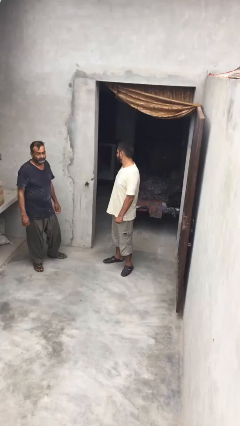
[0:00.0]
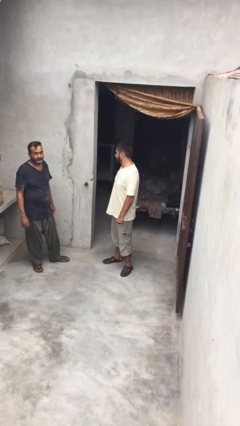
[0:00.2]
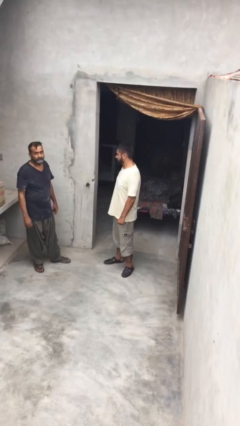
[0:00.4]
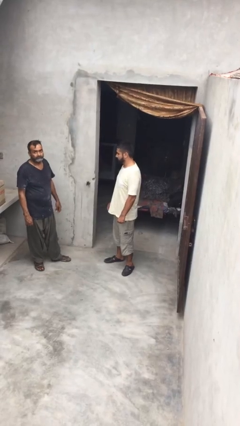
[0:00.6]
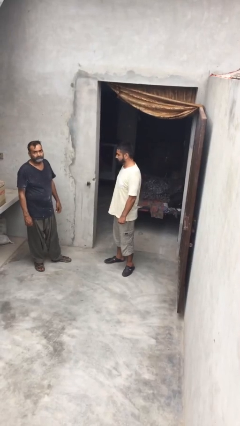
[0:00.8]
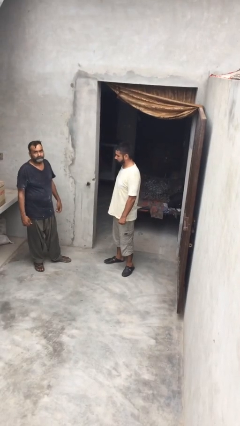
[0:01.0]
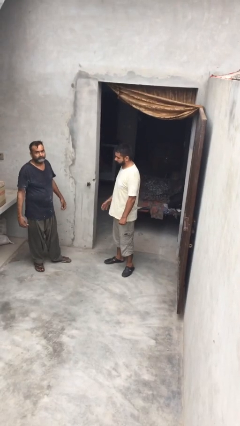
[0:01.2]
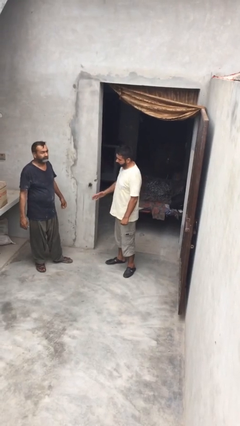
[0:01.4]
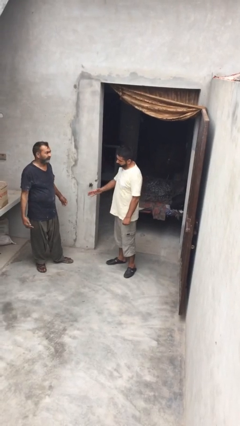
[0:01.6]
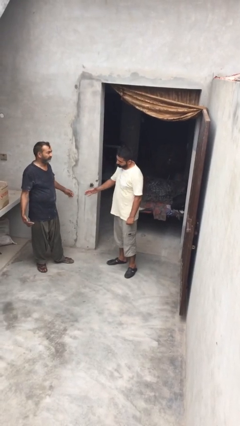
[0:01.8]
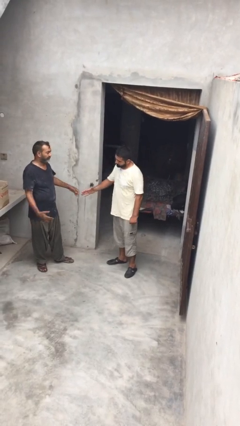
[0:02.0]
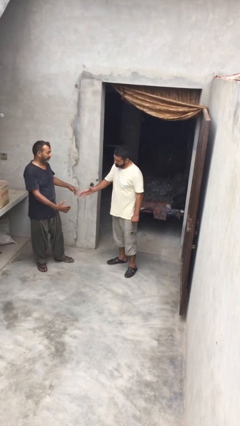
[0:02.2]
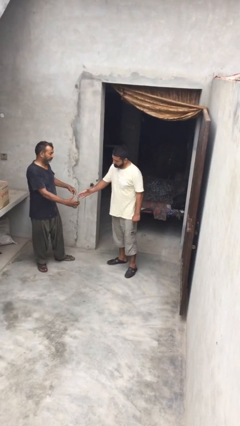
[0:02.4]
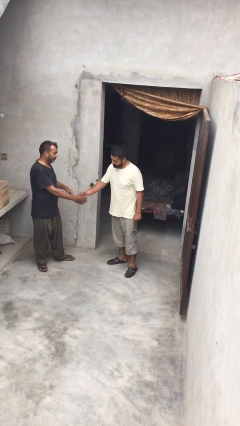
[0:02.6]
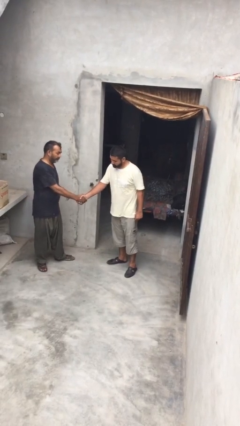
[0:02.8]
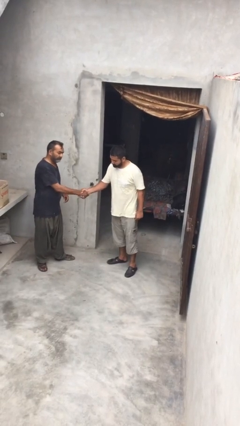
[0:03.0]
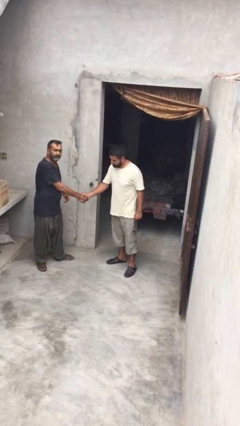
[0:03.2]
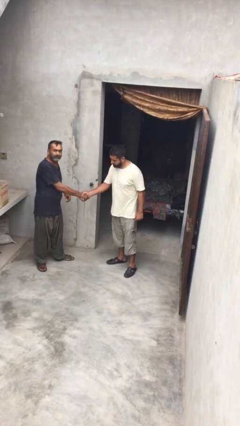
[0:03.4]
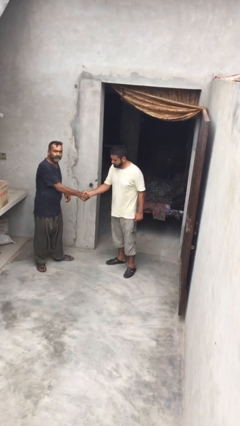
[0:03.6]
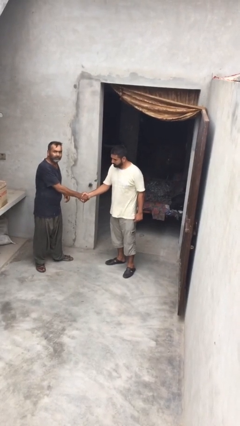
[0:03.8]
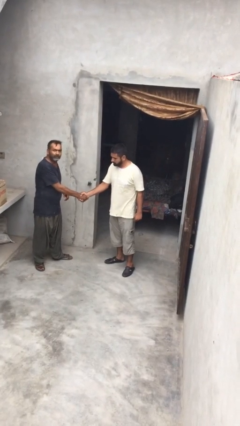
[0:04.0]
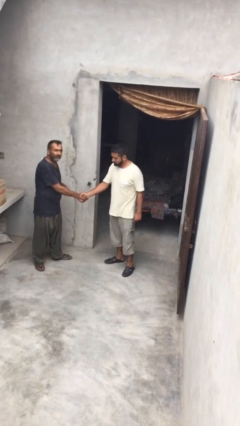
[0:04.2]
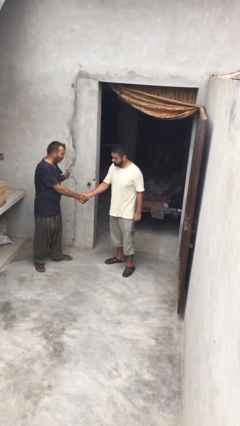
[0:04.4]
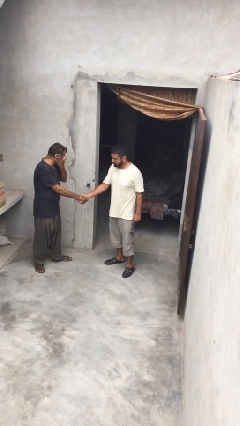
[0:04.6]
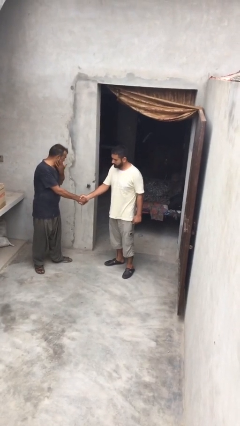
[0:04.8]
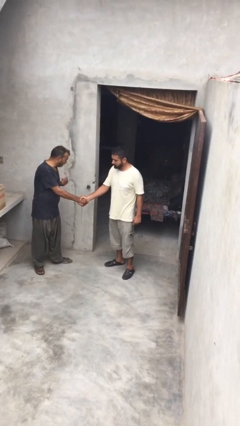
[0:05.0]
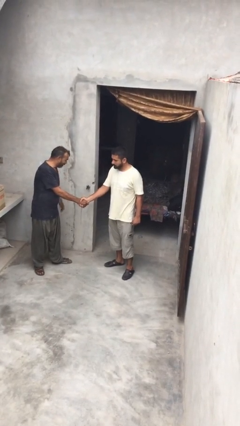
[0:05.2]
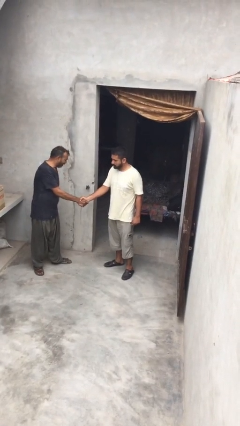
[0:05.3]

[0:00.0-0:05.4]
person shakes hand

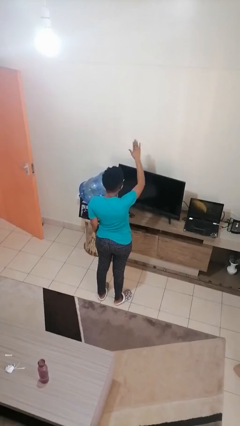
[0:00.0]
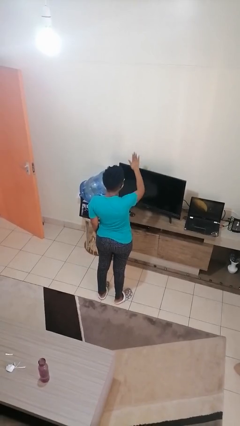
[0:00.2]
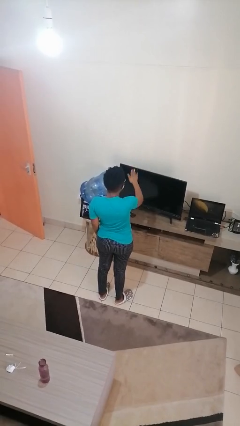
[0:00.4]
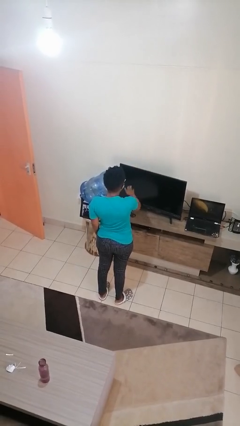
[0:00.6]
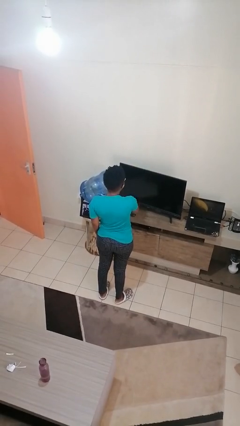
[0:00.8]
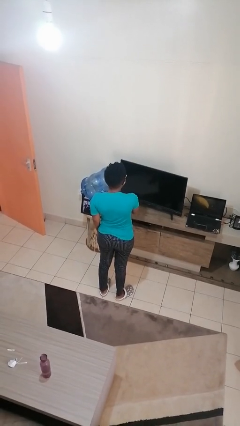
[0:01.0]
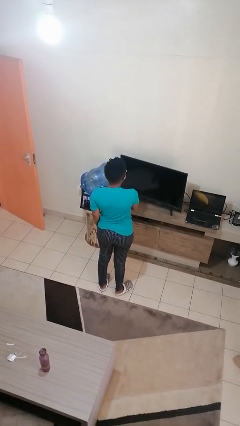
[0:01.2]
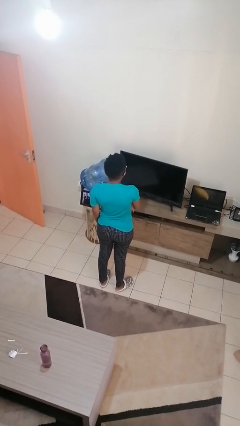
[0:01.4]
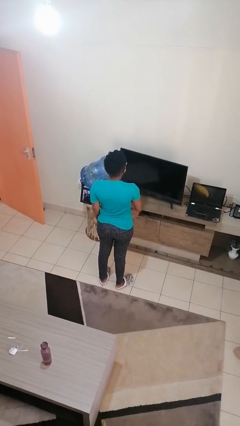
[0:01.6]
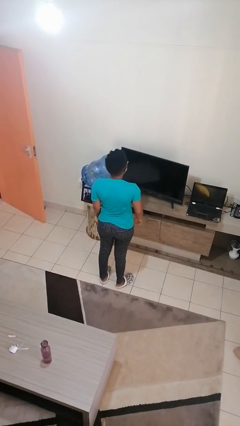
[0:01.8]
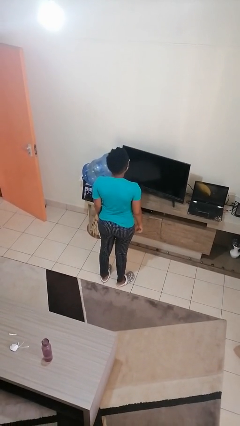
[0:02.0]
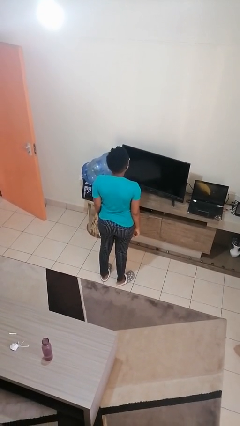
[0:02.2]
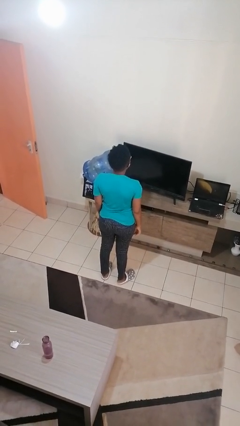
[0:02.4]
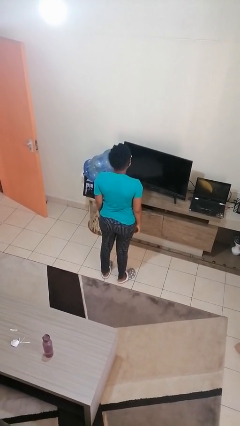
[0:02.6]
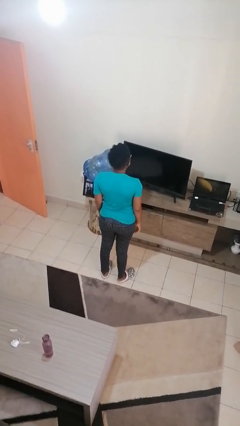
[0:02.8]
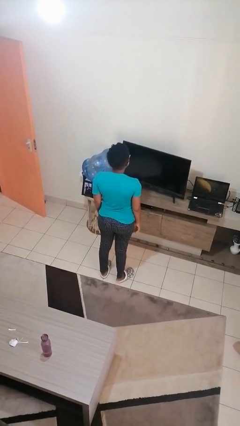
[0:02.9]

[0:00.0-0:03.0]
person gestures swipe down

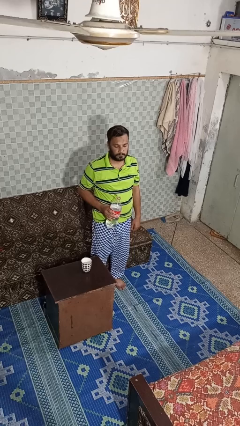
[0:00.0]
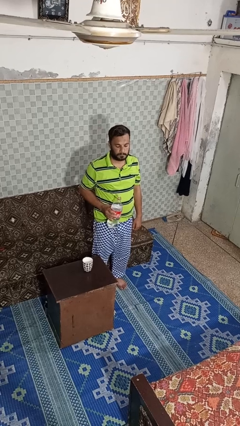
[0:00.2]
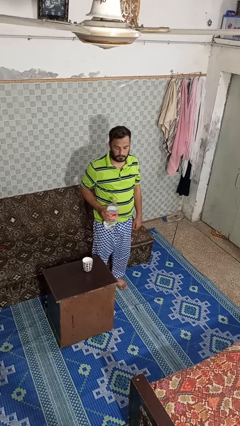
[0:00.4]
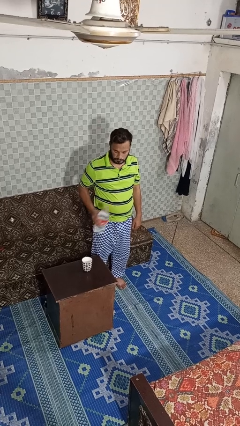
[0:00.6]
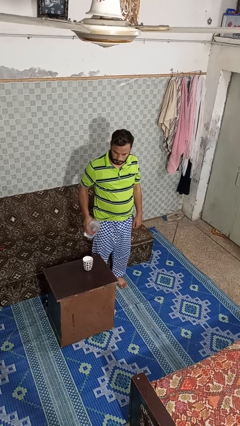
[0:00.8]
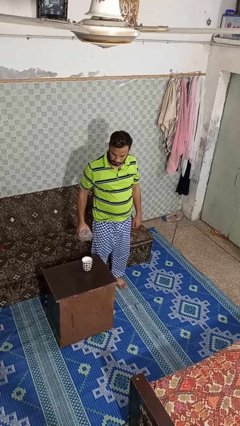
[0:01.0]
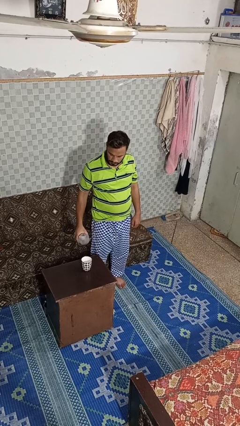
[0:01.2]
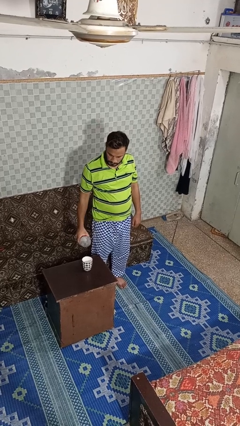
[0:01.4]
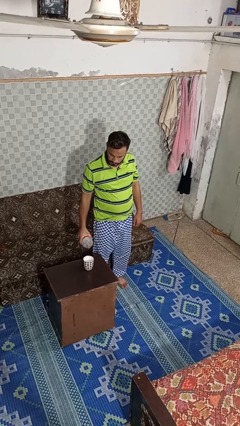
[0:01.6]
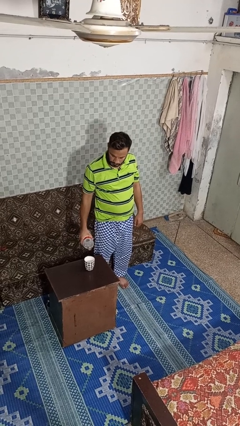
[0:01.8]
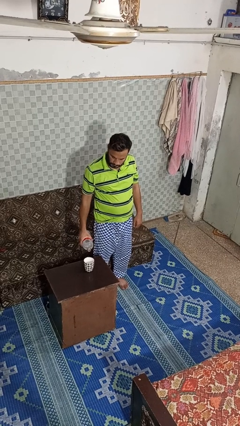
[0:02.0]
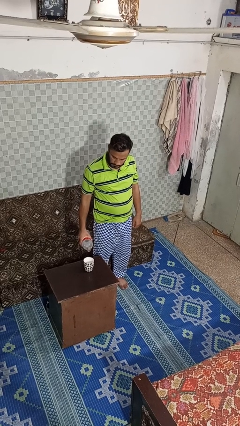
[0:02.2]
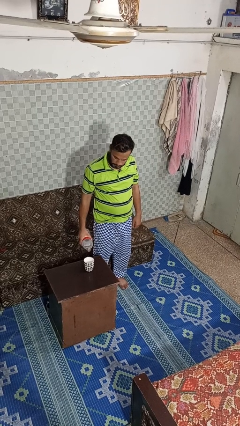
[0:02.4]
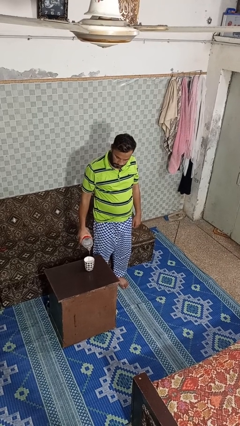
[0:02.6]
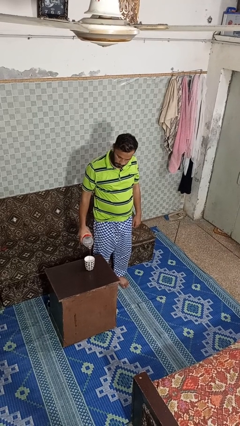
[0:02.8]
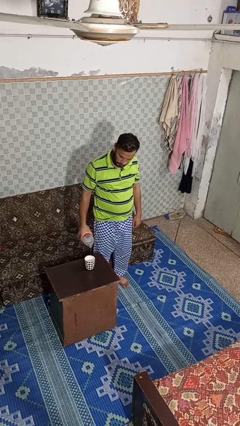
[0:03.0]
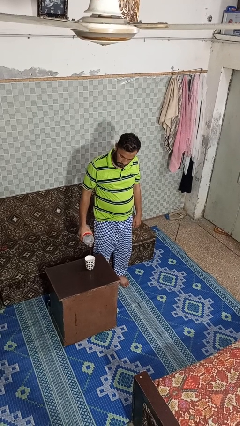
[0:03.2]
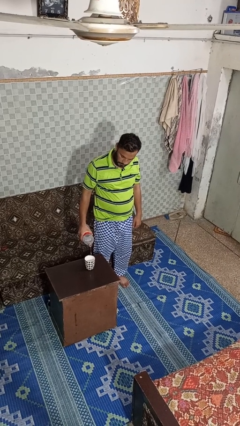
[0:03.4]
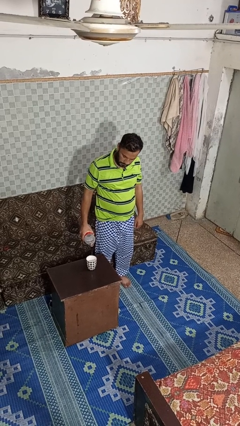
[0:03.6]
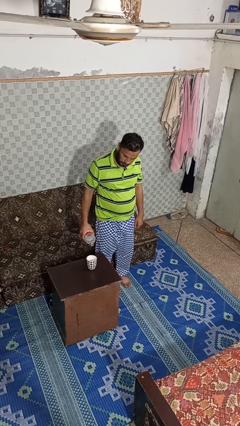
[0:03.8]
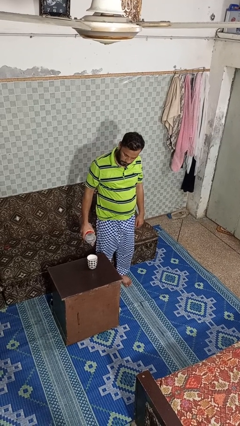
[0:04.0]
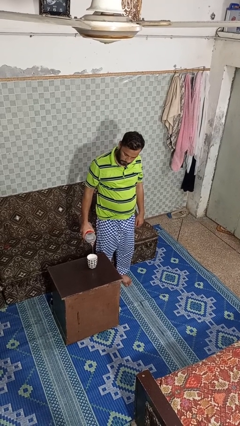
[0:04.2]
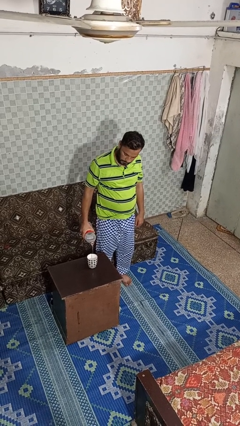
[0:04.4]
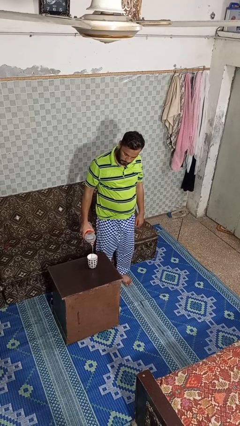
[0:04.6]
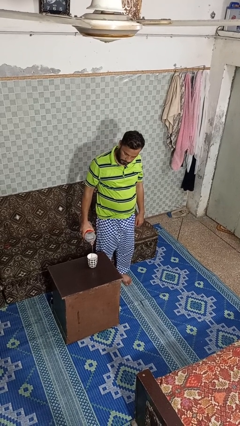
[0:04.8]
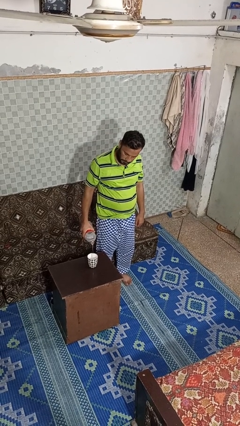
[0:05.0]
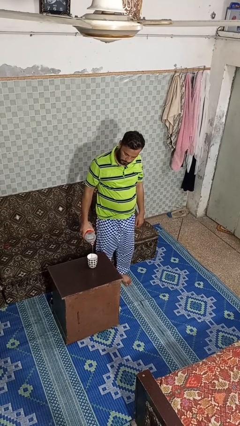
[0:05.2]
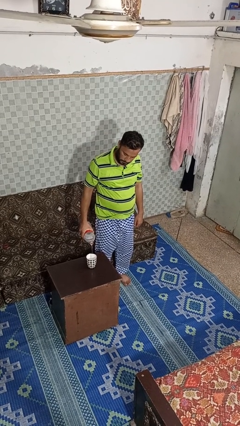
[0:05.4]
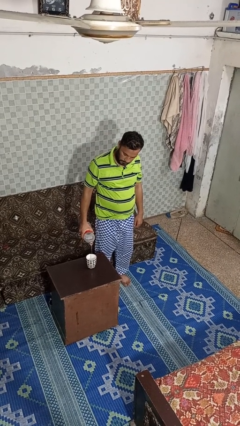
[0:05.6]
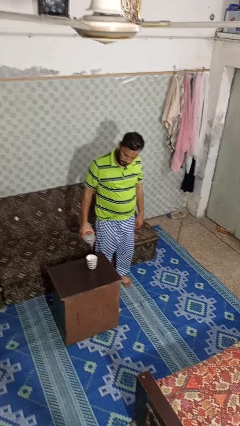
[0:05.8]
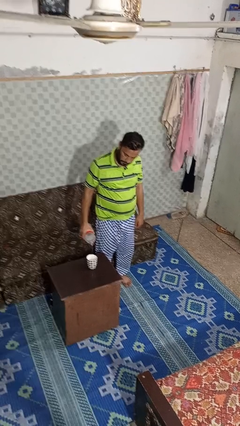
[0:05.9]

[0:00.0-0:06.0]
person pours liquid into cup

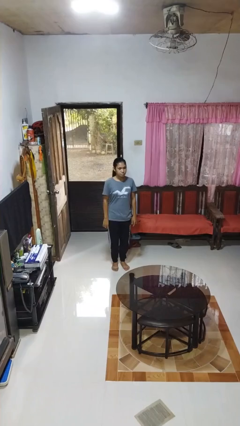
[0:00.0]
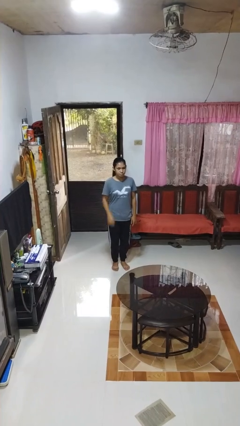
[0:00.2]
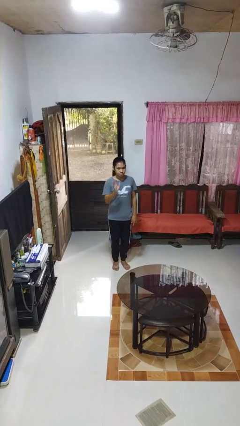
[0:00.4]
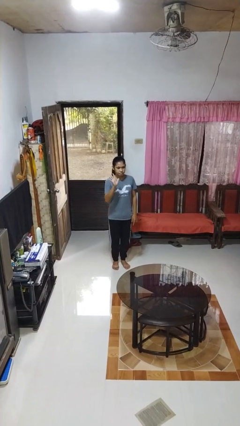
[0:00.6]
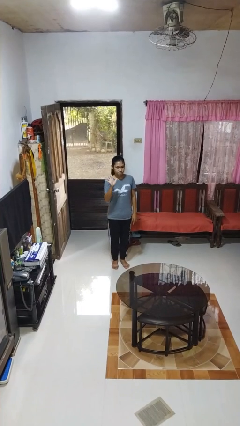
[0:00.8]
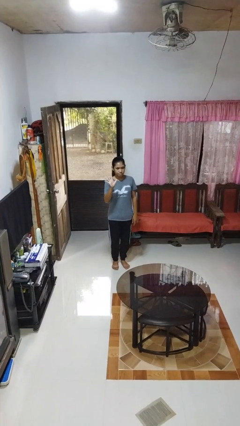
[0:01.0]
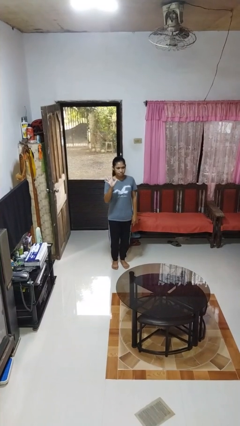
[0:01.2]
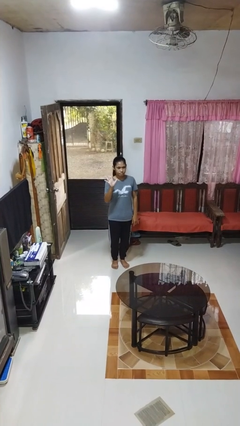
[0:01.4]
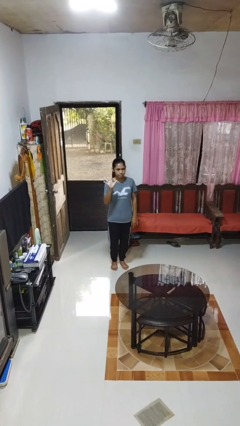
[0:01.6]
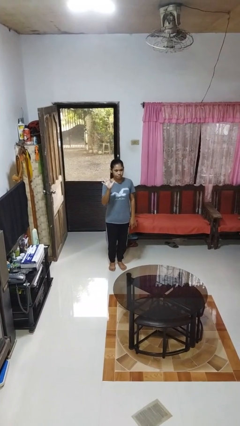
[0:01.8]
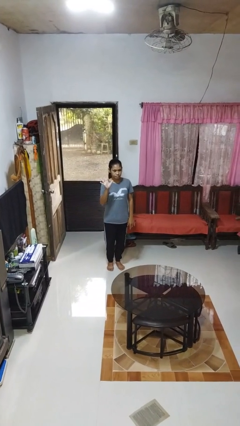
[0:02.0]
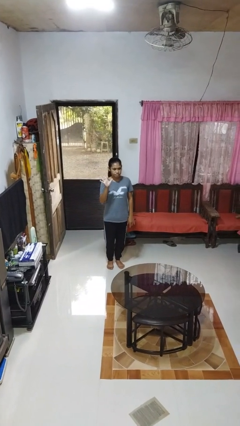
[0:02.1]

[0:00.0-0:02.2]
person gestures number five

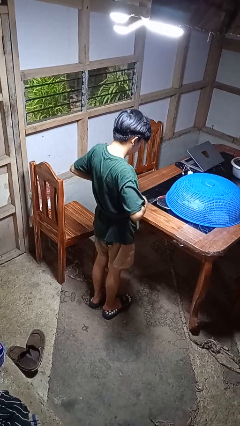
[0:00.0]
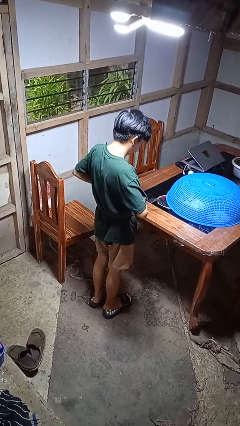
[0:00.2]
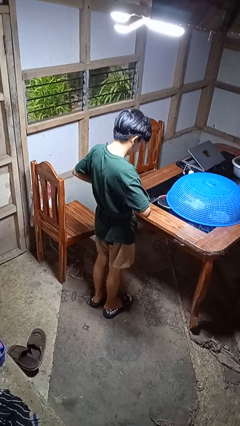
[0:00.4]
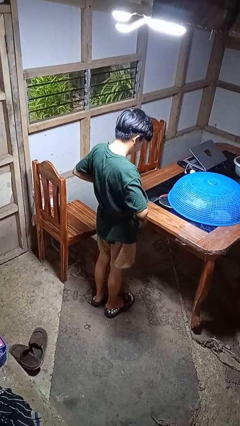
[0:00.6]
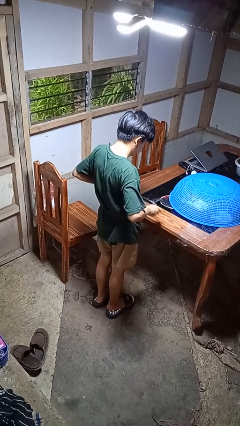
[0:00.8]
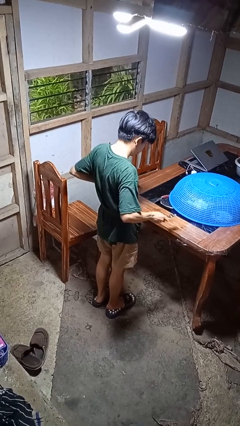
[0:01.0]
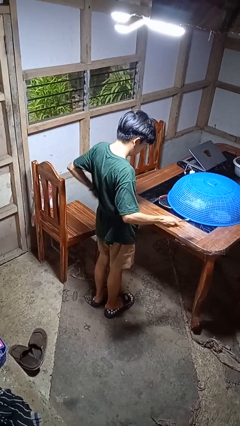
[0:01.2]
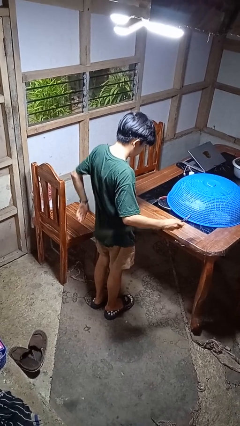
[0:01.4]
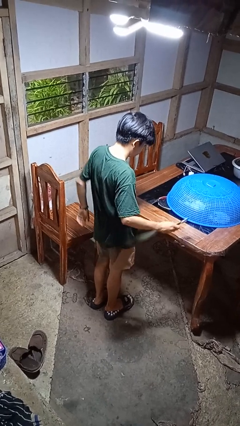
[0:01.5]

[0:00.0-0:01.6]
person takes off belt
